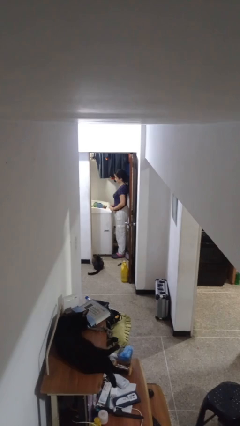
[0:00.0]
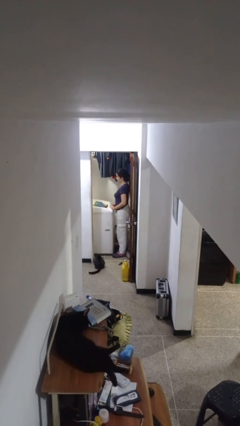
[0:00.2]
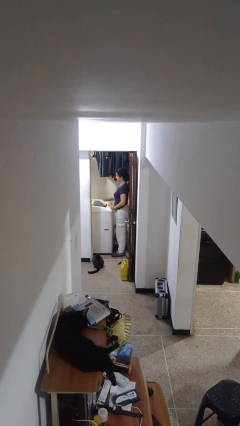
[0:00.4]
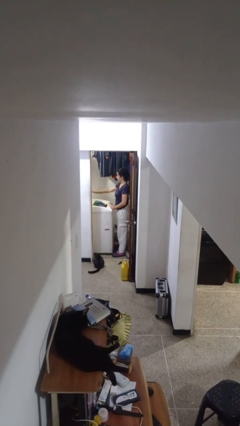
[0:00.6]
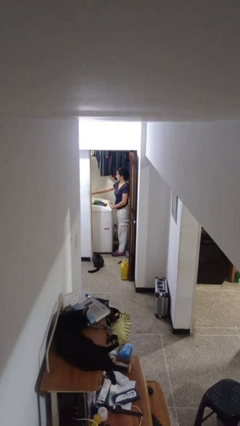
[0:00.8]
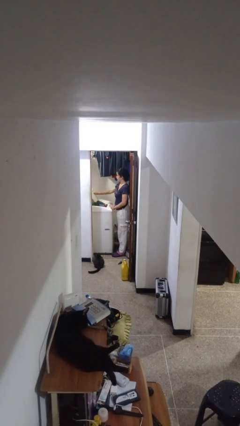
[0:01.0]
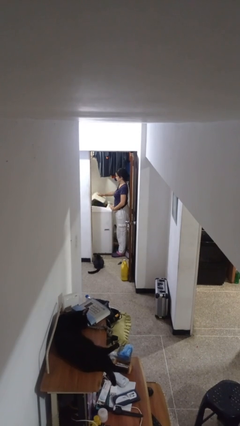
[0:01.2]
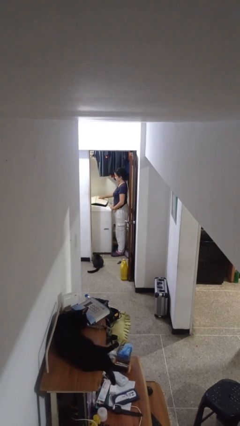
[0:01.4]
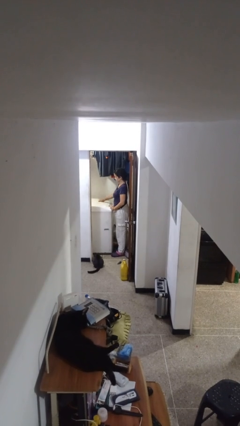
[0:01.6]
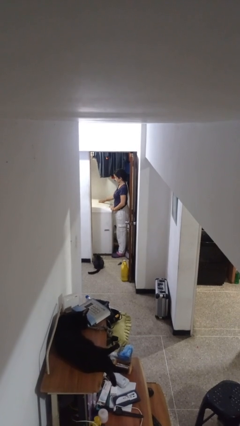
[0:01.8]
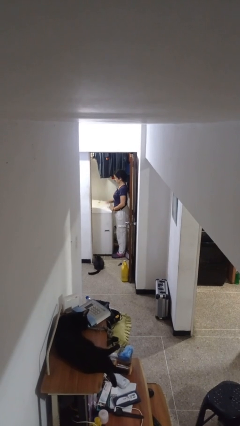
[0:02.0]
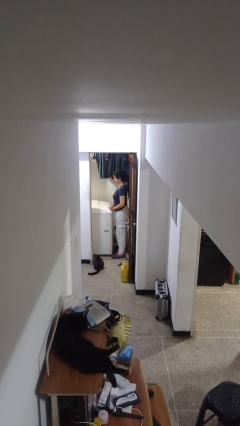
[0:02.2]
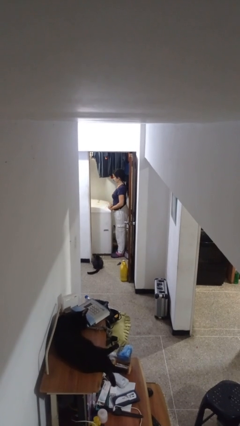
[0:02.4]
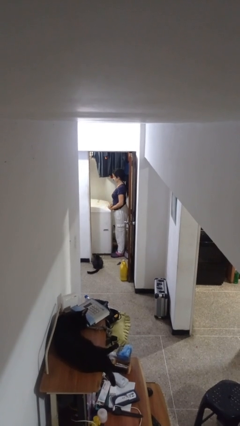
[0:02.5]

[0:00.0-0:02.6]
person closes clothes washer

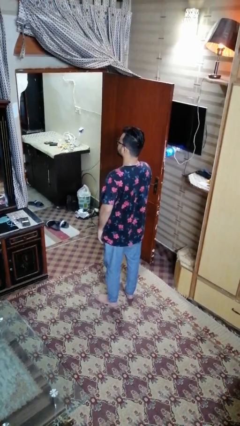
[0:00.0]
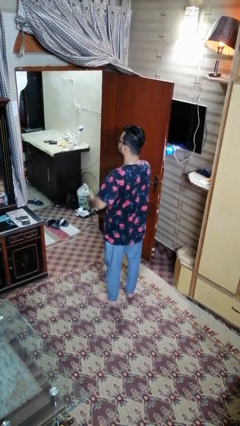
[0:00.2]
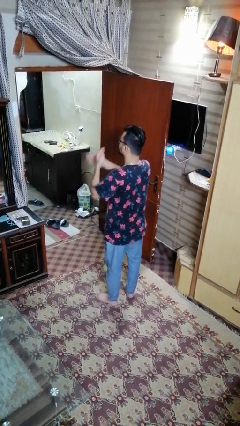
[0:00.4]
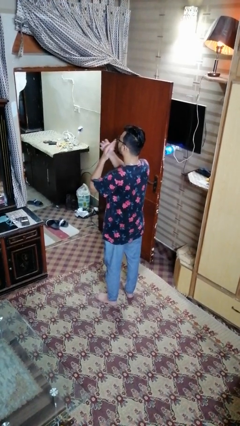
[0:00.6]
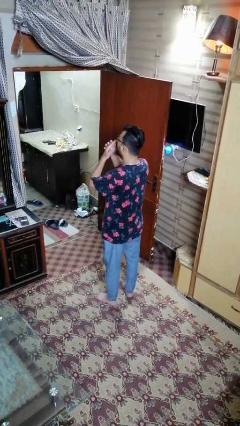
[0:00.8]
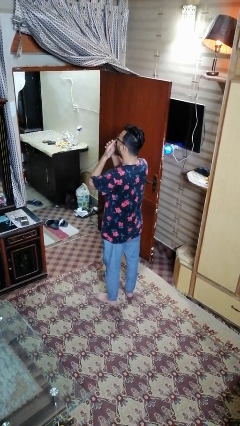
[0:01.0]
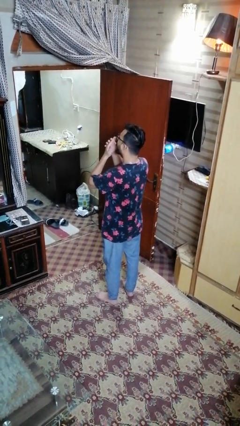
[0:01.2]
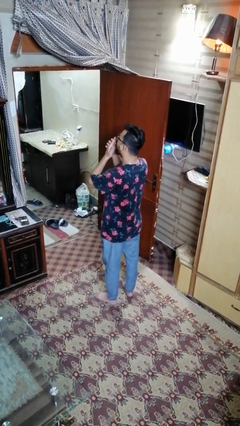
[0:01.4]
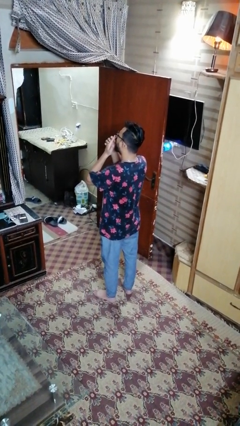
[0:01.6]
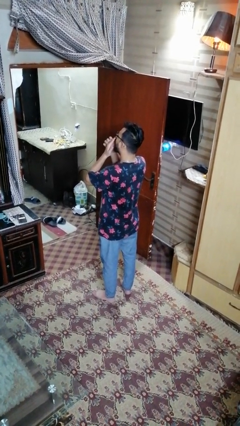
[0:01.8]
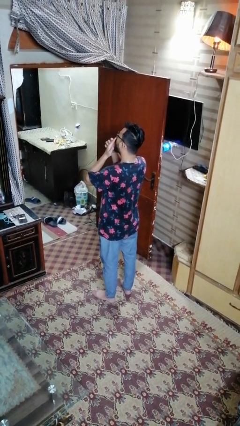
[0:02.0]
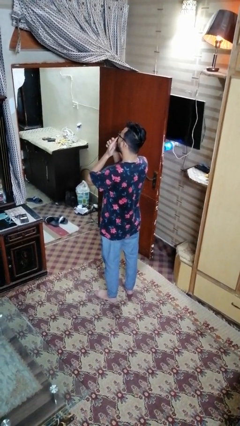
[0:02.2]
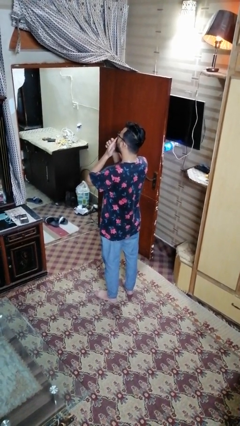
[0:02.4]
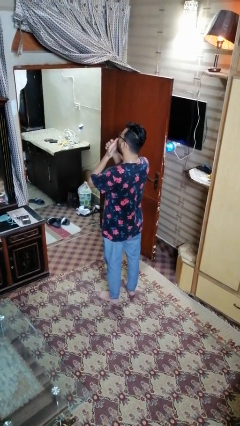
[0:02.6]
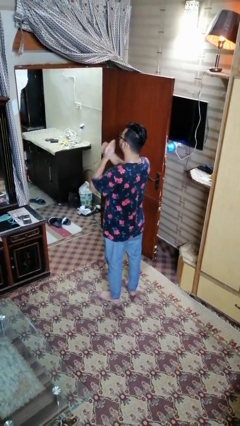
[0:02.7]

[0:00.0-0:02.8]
person yawns

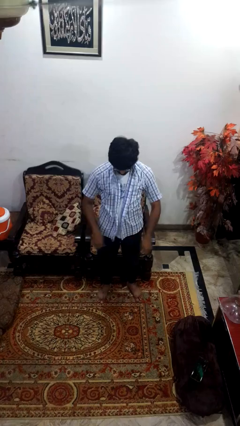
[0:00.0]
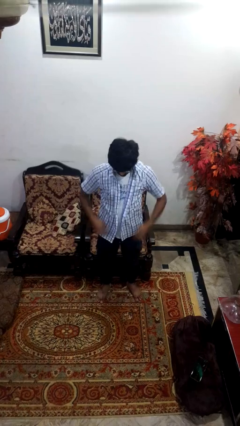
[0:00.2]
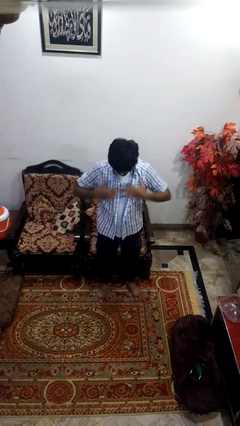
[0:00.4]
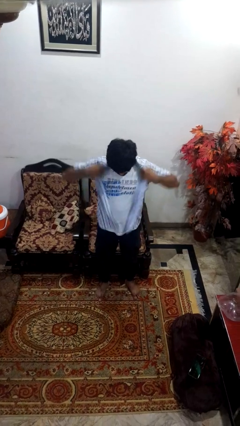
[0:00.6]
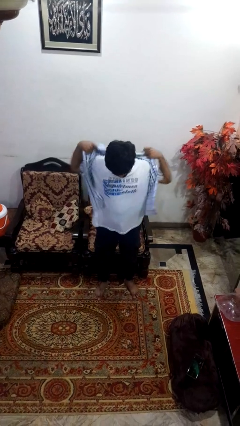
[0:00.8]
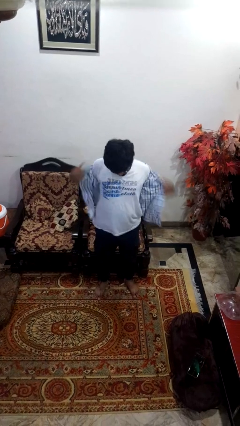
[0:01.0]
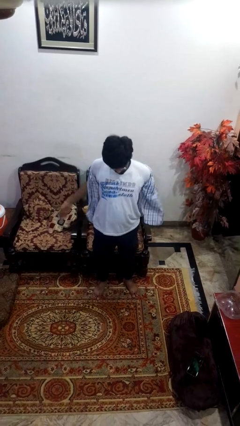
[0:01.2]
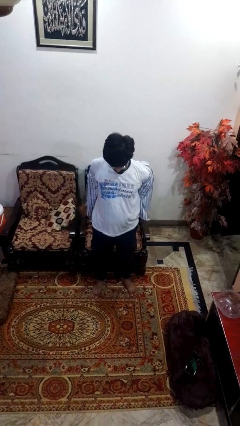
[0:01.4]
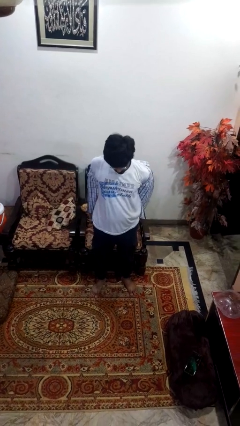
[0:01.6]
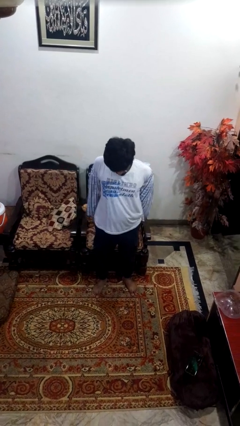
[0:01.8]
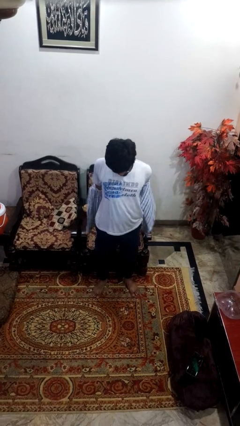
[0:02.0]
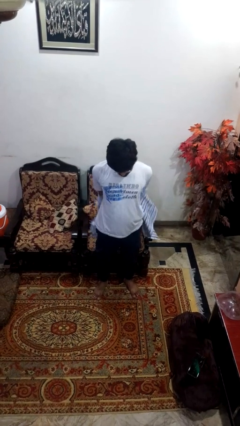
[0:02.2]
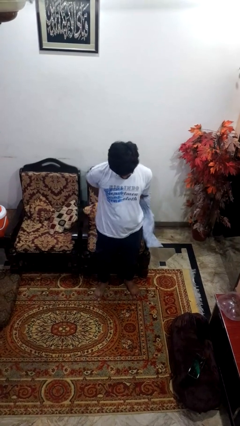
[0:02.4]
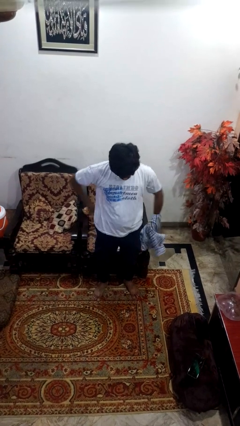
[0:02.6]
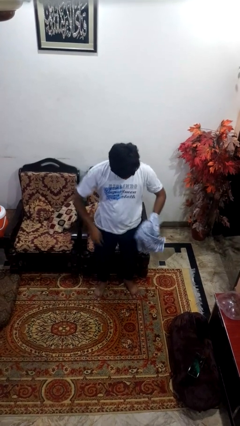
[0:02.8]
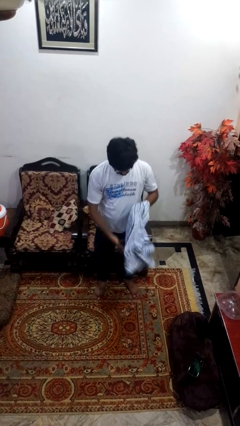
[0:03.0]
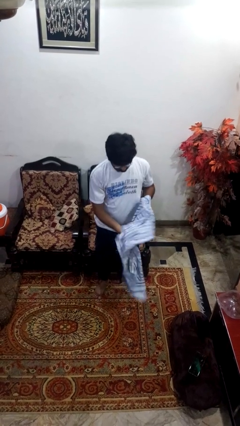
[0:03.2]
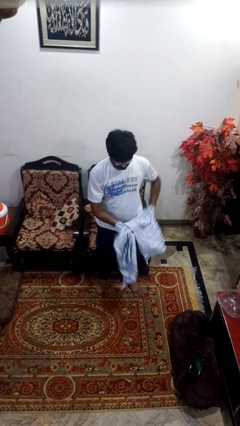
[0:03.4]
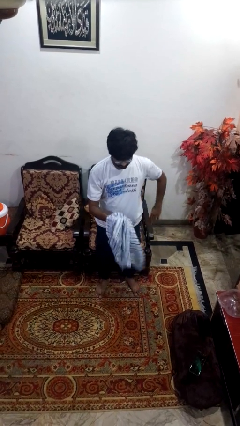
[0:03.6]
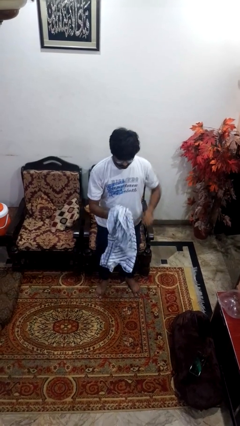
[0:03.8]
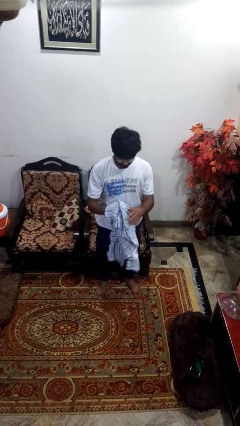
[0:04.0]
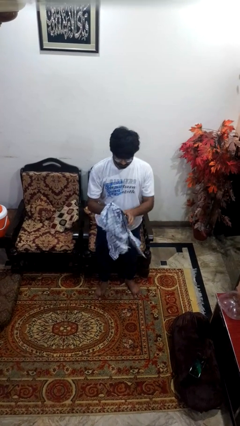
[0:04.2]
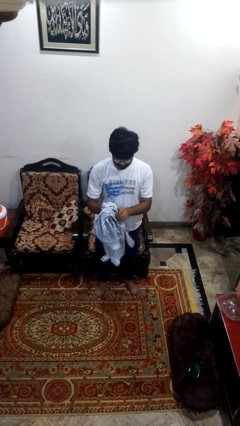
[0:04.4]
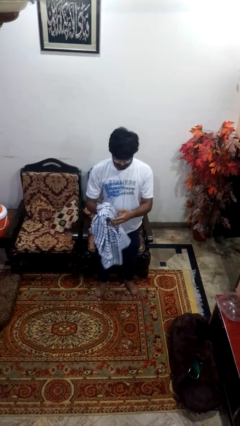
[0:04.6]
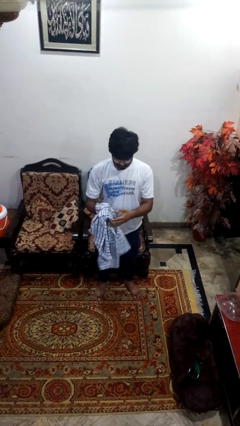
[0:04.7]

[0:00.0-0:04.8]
person takes off shirt

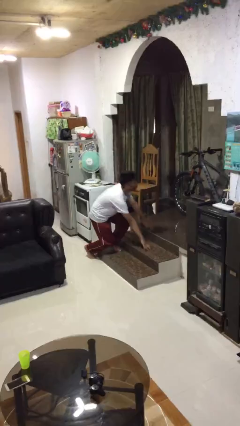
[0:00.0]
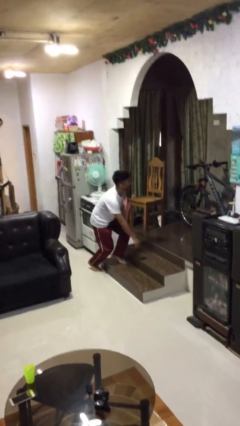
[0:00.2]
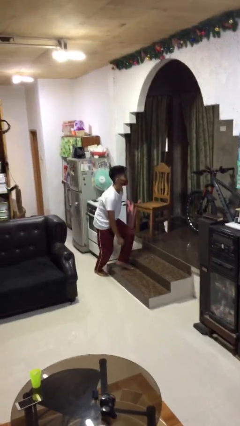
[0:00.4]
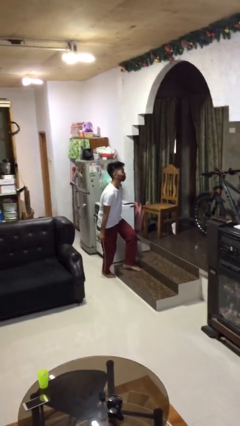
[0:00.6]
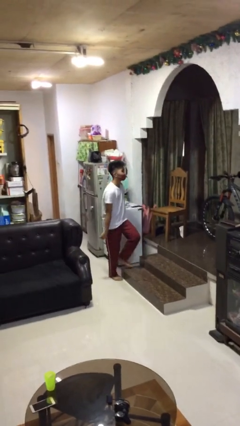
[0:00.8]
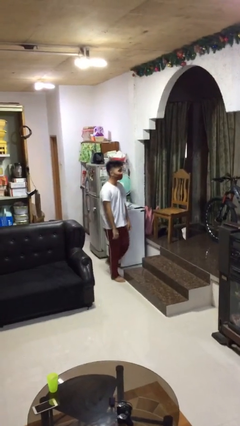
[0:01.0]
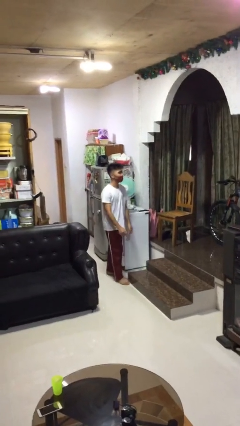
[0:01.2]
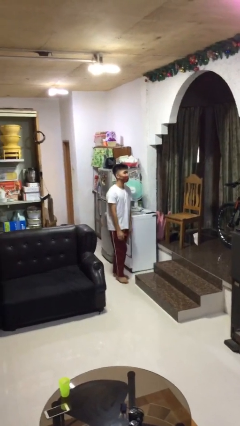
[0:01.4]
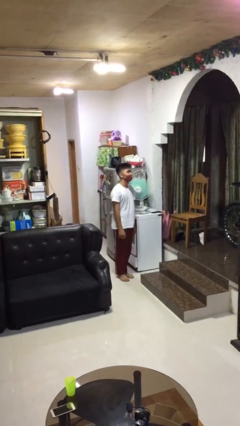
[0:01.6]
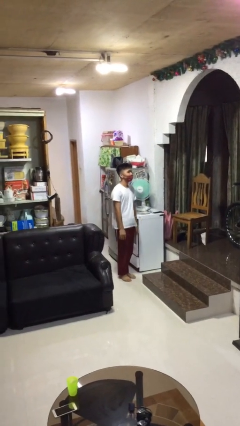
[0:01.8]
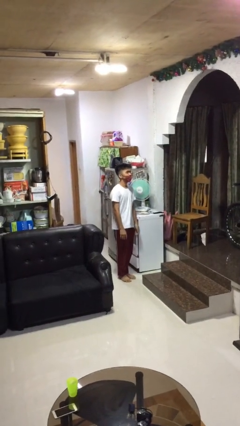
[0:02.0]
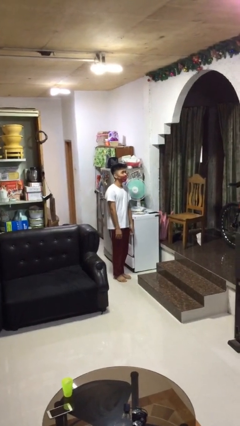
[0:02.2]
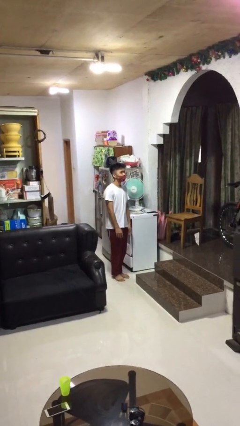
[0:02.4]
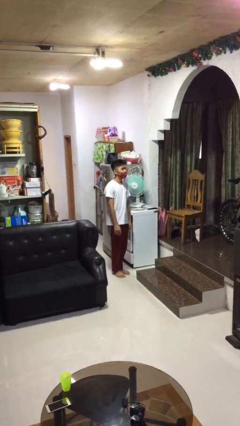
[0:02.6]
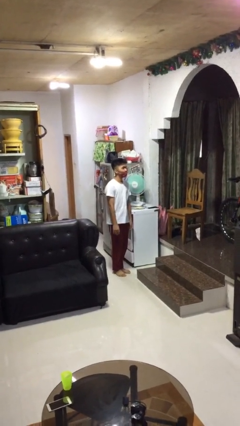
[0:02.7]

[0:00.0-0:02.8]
person stands up from floor

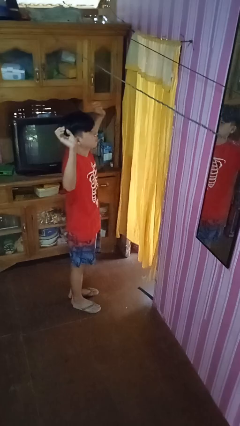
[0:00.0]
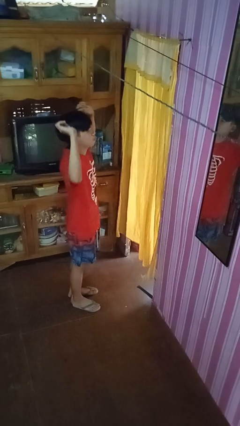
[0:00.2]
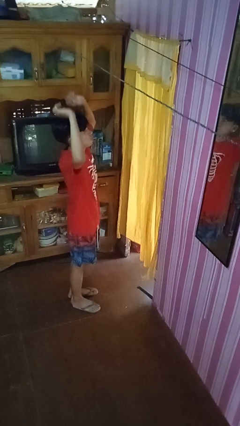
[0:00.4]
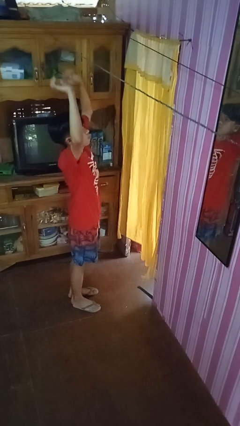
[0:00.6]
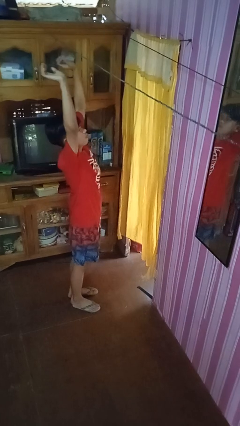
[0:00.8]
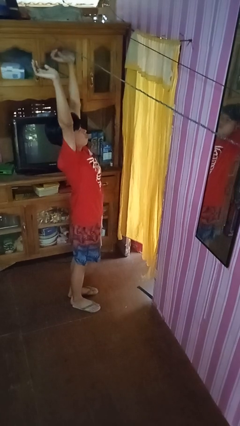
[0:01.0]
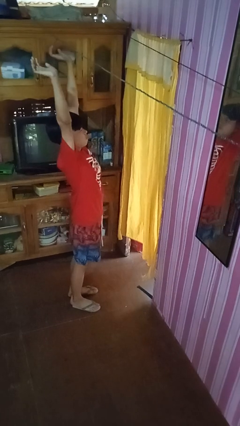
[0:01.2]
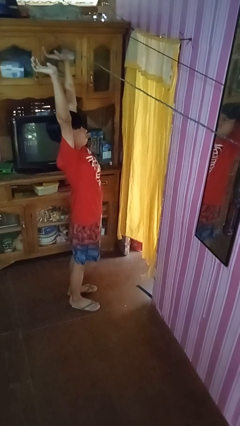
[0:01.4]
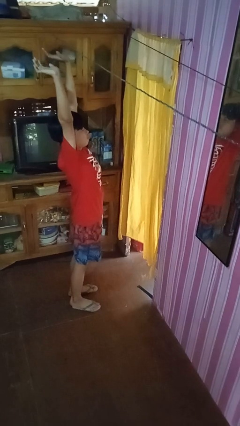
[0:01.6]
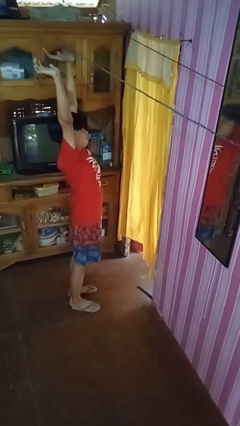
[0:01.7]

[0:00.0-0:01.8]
person stretches arms over head

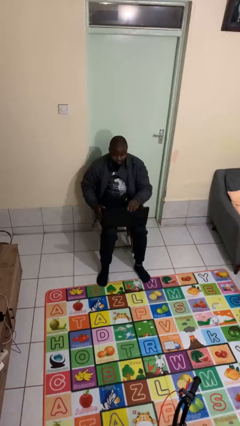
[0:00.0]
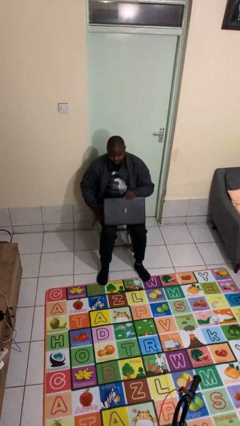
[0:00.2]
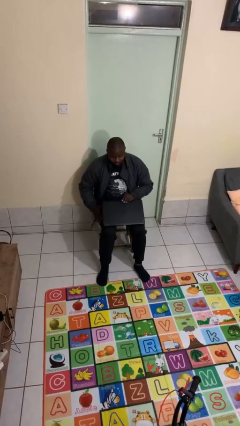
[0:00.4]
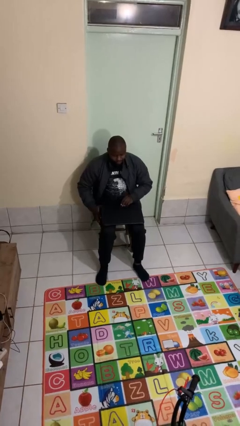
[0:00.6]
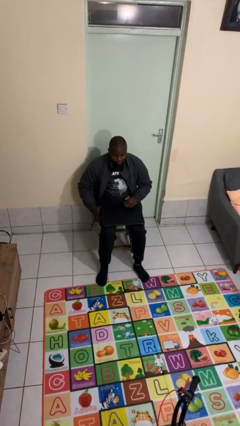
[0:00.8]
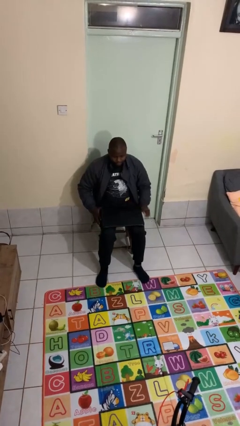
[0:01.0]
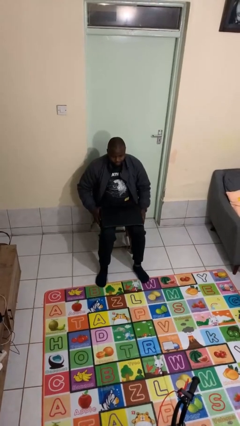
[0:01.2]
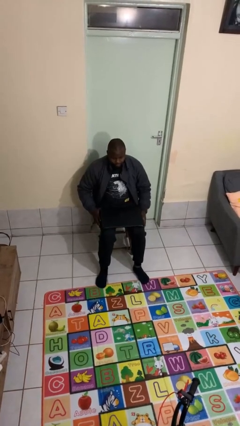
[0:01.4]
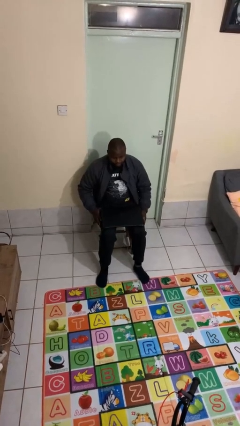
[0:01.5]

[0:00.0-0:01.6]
person closes laptop

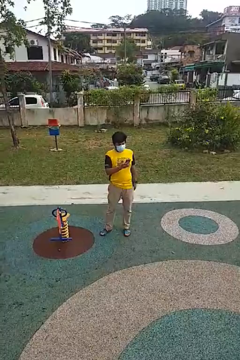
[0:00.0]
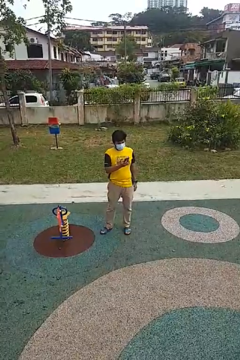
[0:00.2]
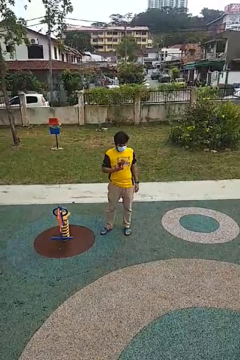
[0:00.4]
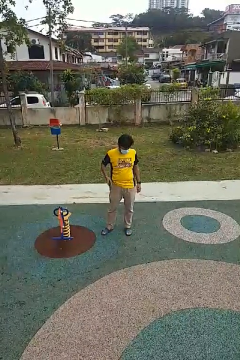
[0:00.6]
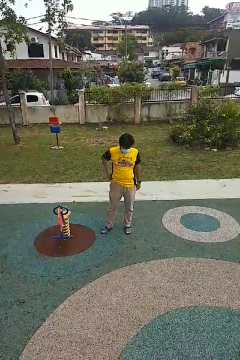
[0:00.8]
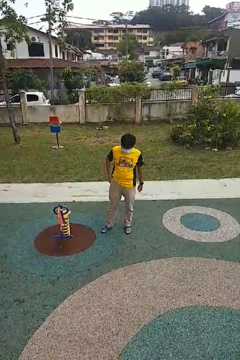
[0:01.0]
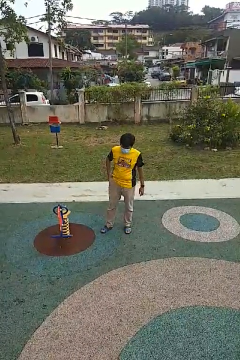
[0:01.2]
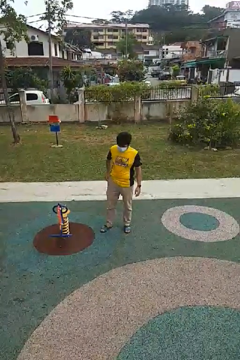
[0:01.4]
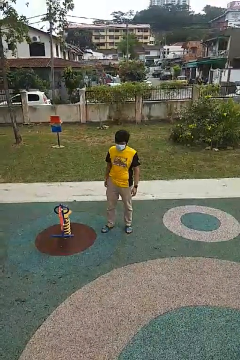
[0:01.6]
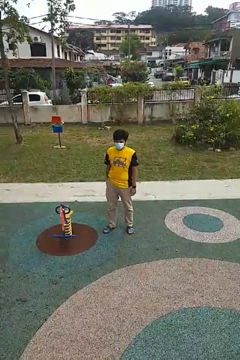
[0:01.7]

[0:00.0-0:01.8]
person puts phone into pocket
